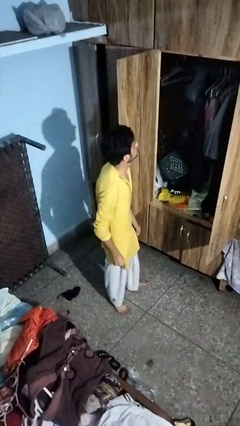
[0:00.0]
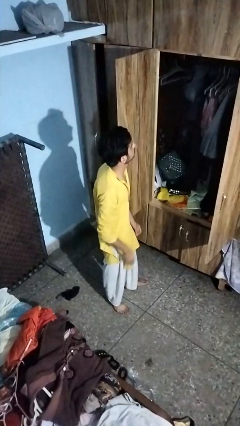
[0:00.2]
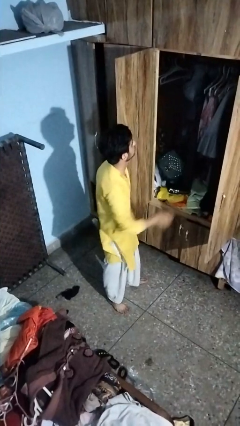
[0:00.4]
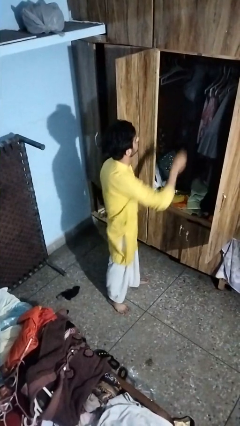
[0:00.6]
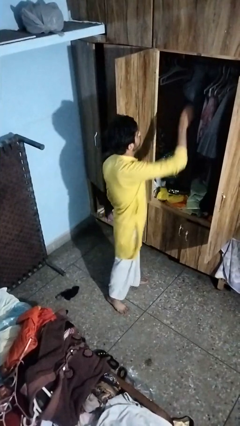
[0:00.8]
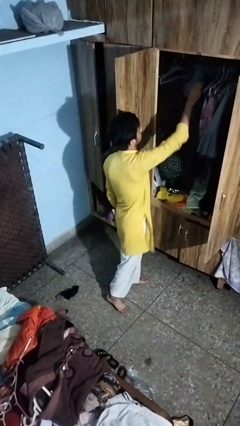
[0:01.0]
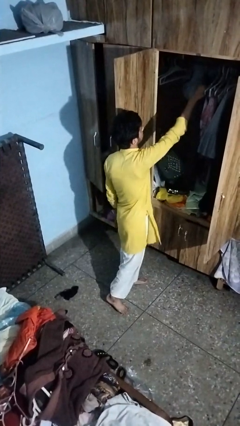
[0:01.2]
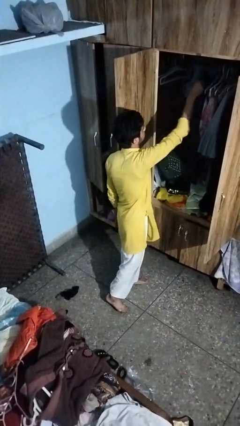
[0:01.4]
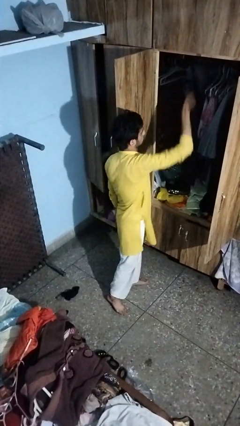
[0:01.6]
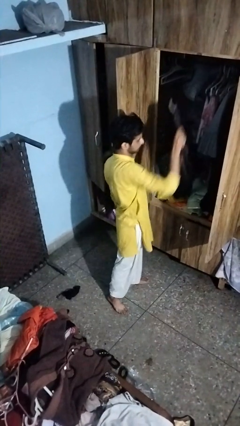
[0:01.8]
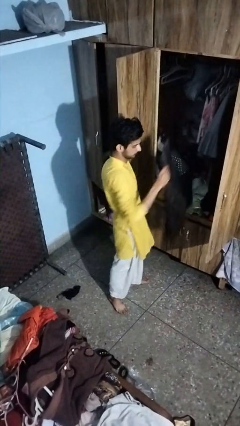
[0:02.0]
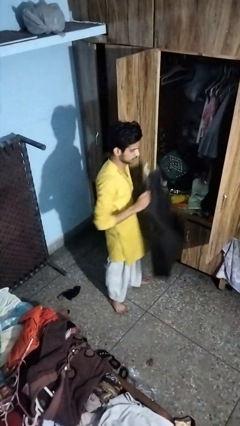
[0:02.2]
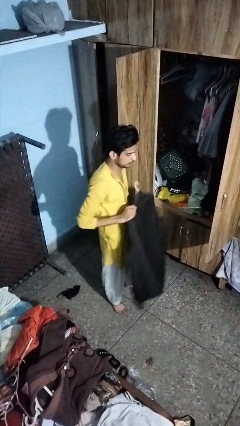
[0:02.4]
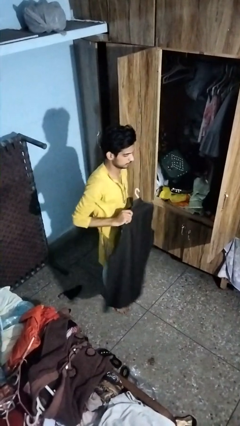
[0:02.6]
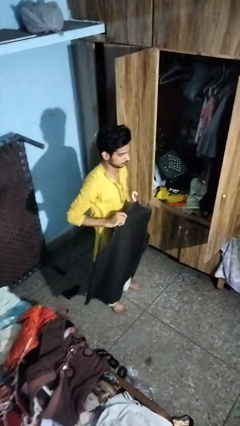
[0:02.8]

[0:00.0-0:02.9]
person takes clothes from closet

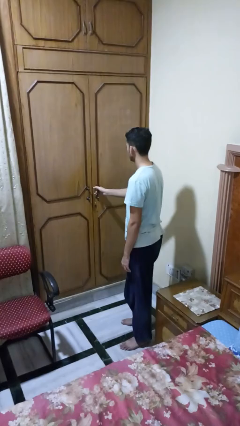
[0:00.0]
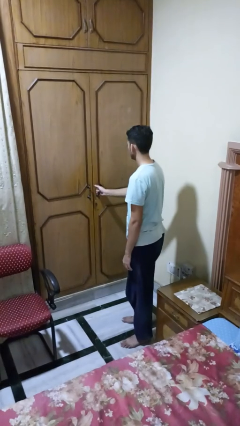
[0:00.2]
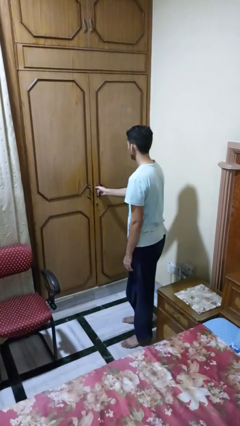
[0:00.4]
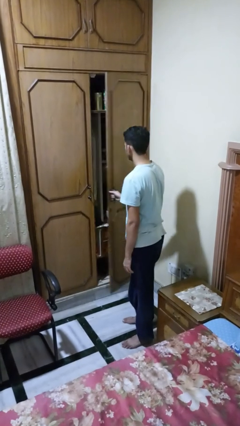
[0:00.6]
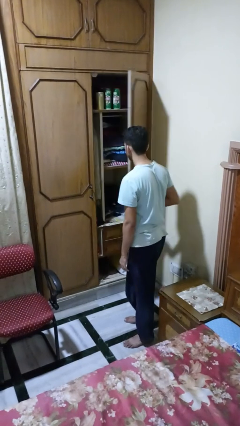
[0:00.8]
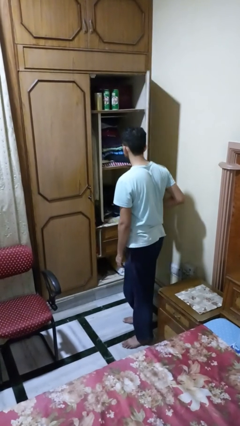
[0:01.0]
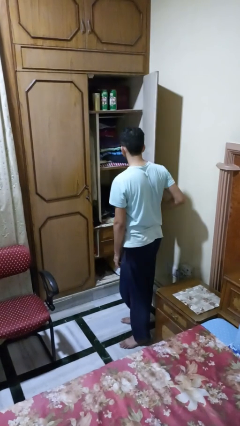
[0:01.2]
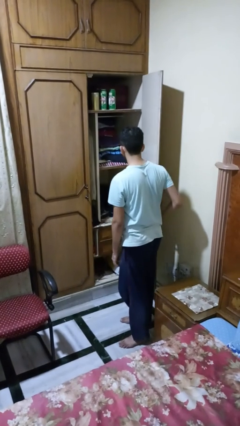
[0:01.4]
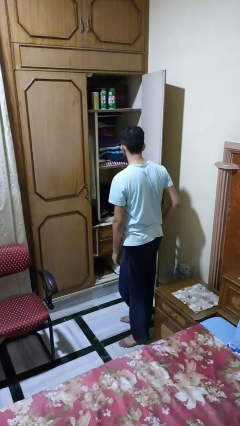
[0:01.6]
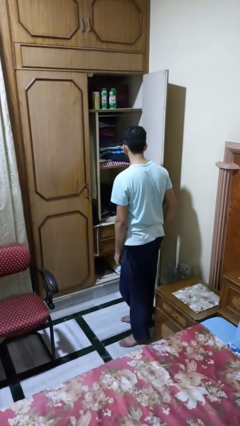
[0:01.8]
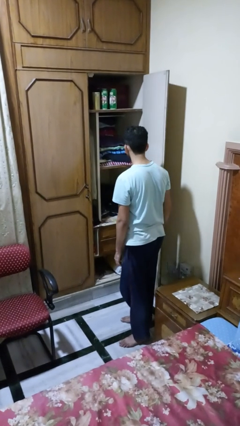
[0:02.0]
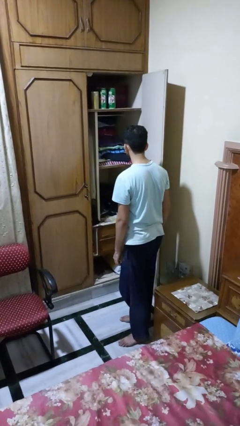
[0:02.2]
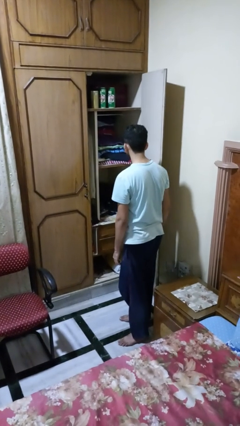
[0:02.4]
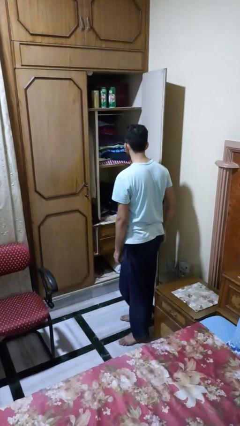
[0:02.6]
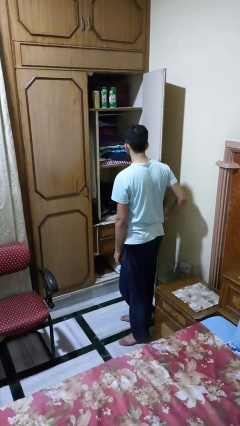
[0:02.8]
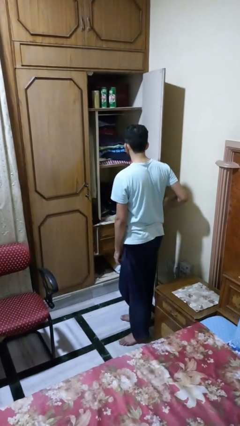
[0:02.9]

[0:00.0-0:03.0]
person opens closet door

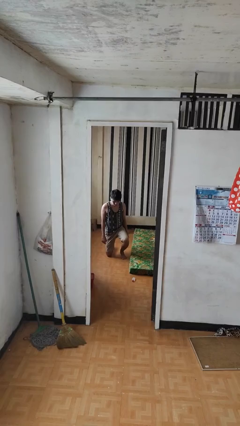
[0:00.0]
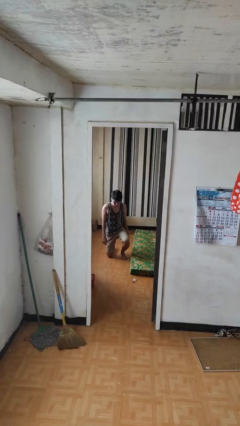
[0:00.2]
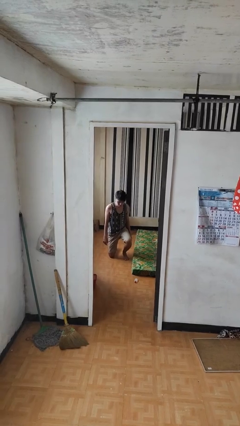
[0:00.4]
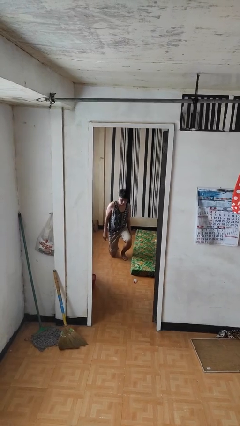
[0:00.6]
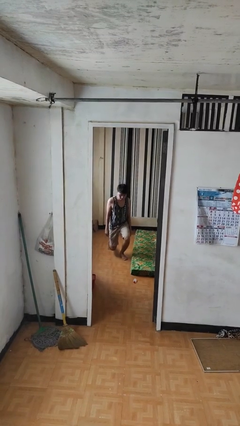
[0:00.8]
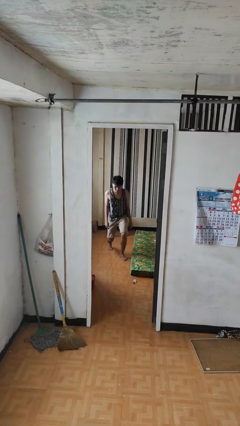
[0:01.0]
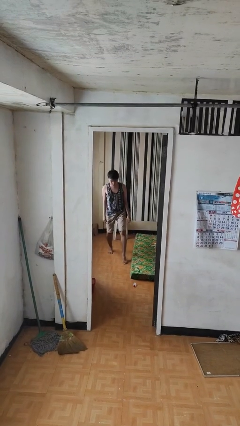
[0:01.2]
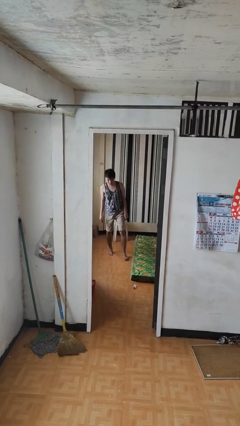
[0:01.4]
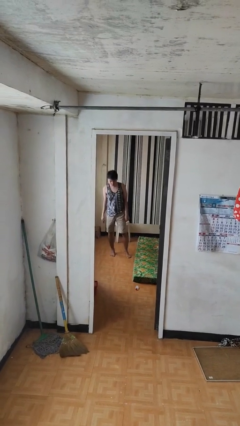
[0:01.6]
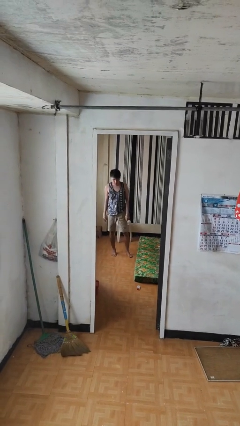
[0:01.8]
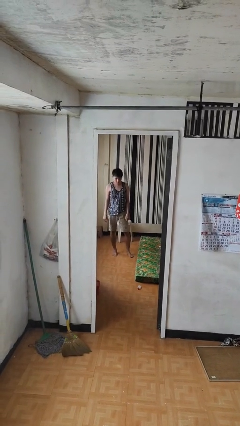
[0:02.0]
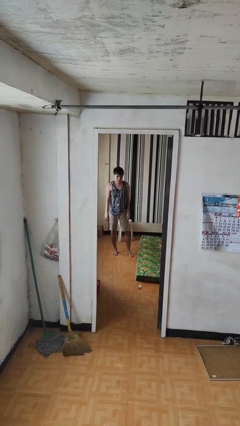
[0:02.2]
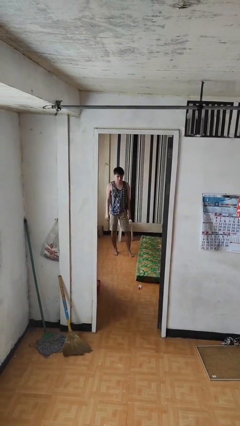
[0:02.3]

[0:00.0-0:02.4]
person stands up from floor

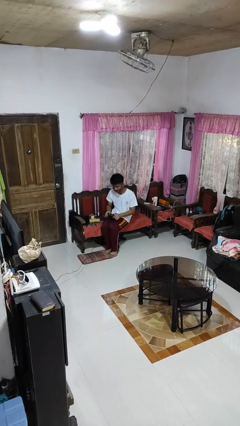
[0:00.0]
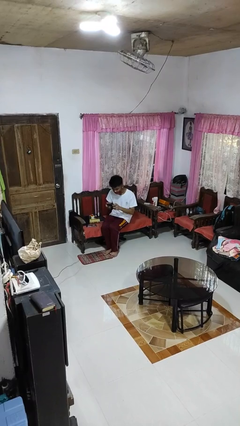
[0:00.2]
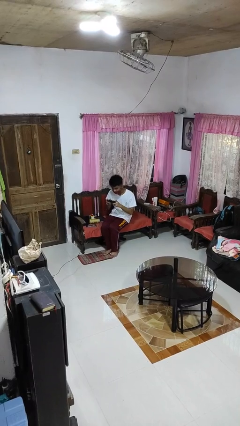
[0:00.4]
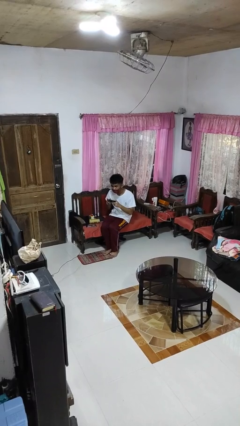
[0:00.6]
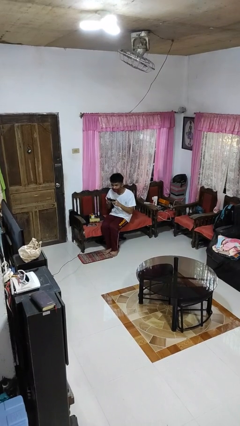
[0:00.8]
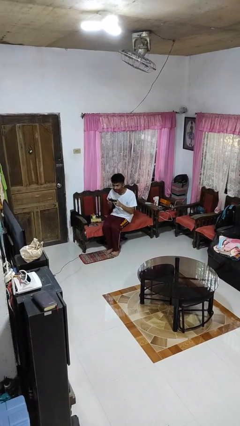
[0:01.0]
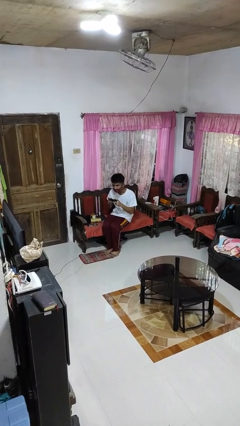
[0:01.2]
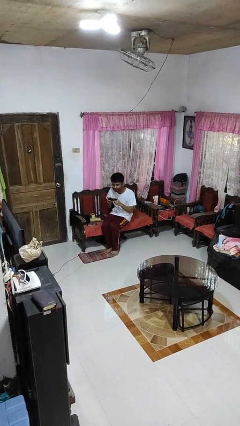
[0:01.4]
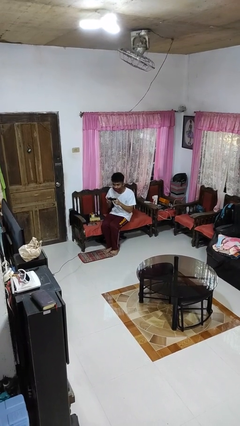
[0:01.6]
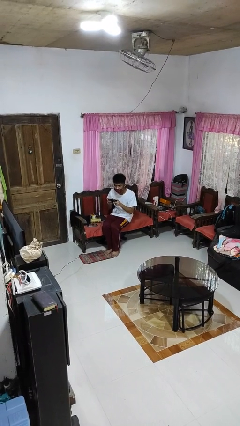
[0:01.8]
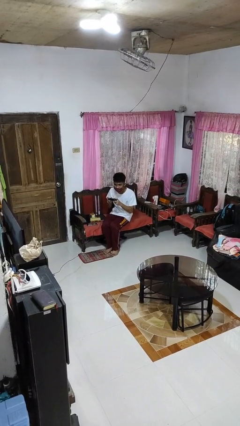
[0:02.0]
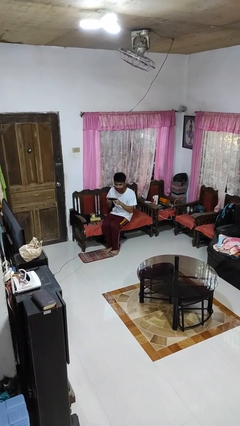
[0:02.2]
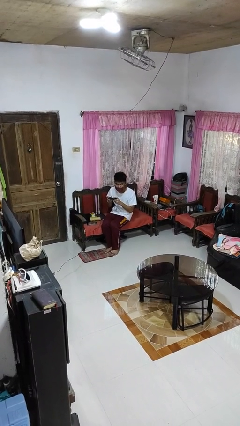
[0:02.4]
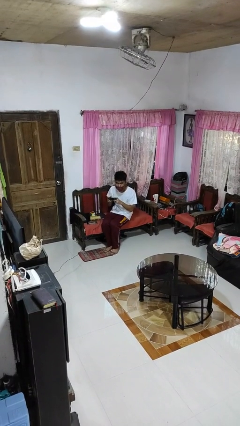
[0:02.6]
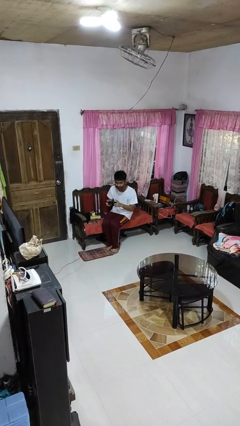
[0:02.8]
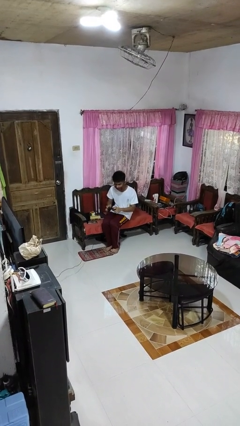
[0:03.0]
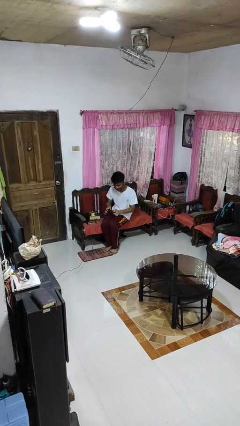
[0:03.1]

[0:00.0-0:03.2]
person interacts with handheld game

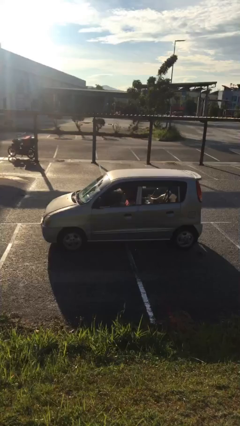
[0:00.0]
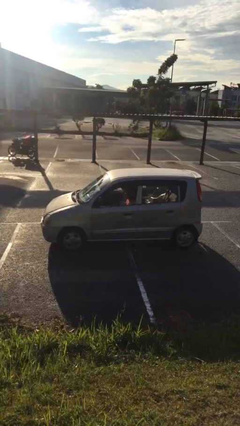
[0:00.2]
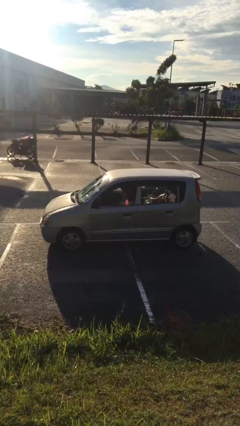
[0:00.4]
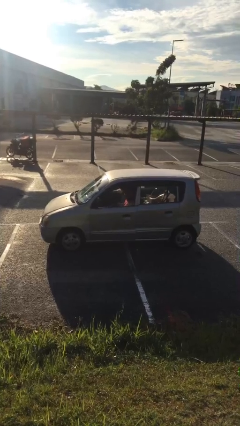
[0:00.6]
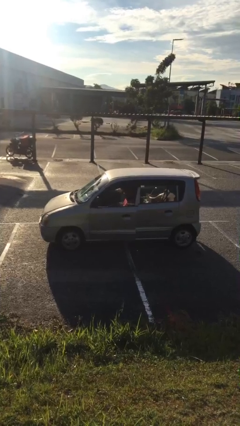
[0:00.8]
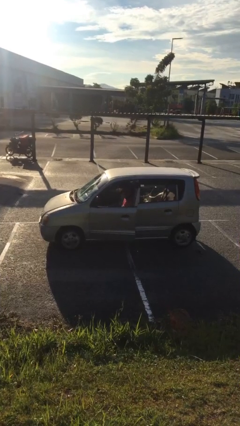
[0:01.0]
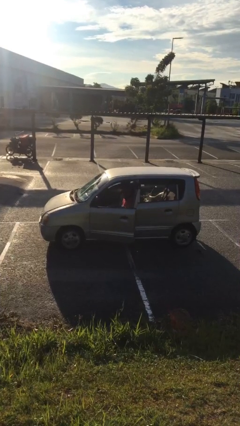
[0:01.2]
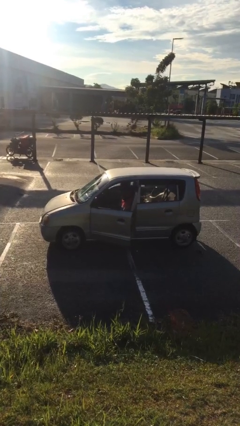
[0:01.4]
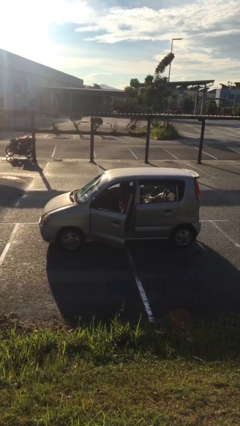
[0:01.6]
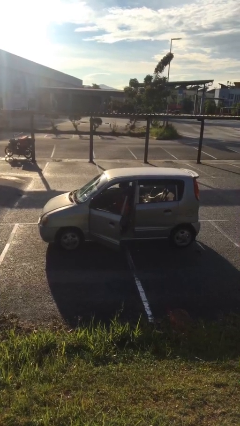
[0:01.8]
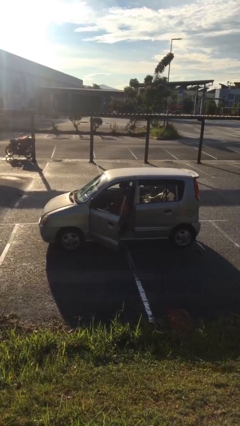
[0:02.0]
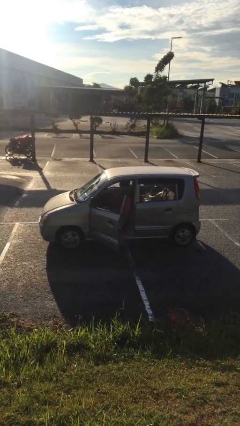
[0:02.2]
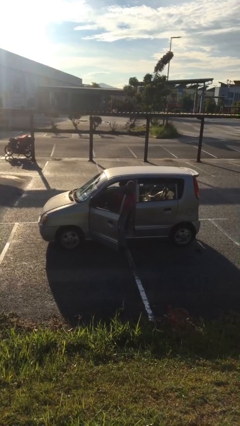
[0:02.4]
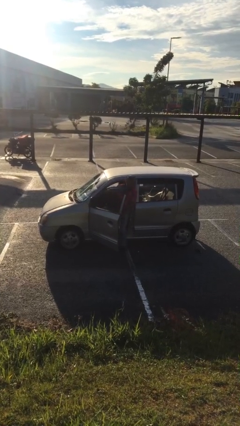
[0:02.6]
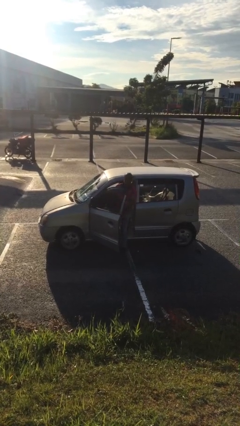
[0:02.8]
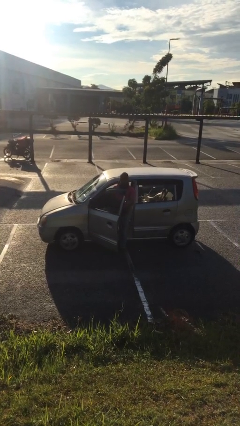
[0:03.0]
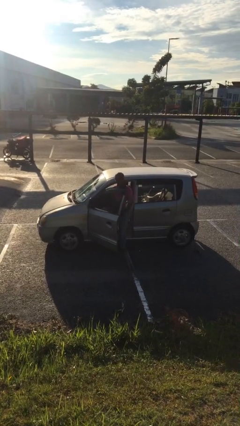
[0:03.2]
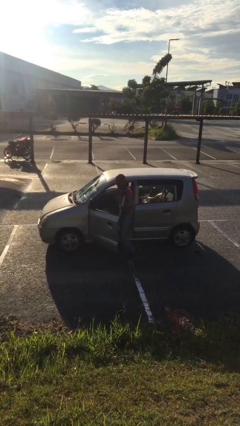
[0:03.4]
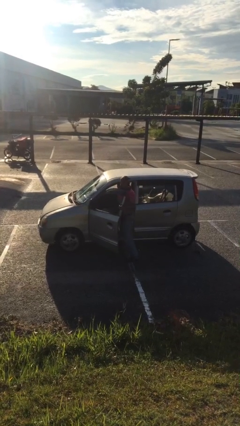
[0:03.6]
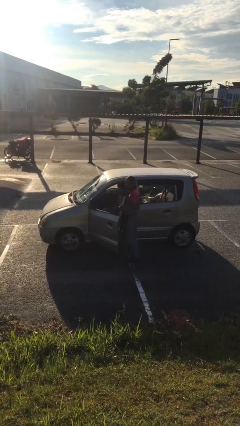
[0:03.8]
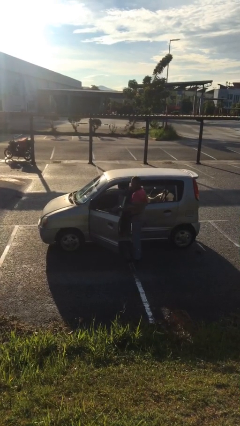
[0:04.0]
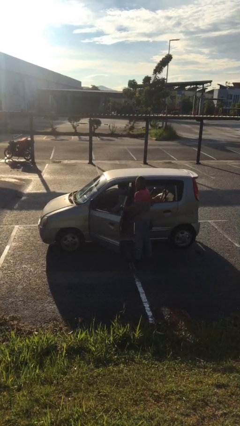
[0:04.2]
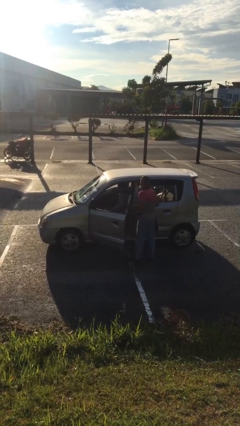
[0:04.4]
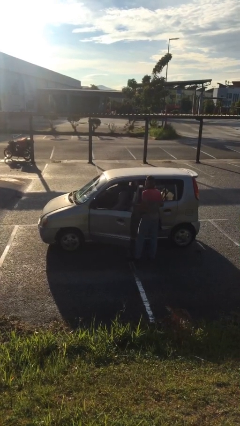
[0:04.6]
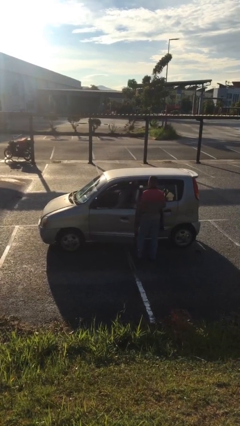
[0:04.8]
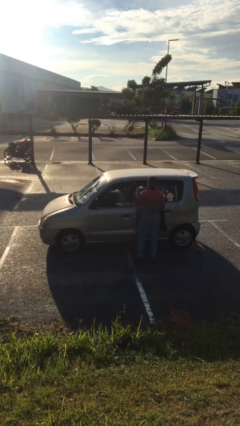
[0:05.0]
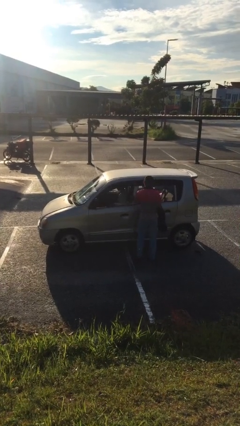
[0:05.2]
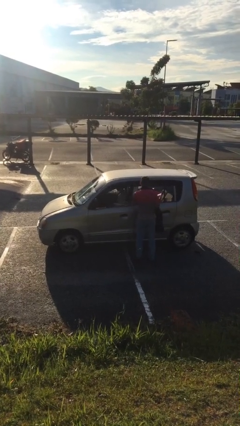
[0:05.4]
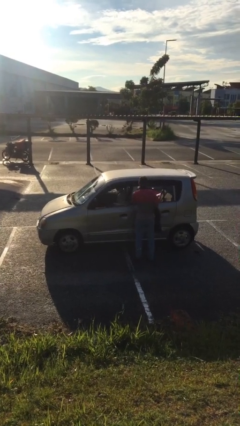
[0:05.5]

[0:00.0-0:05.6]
car drops off person

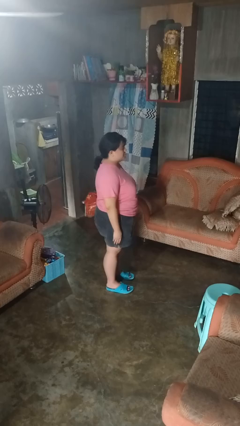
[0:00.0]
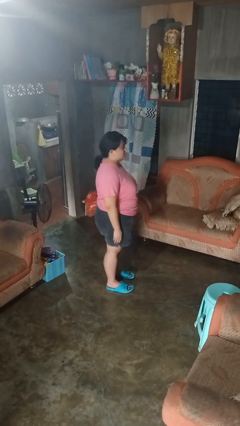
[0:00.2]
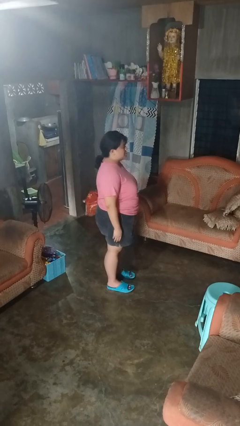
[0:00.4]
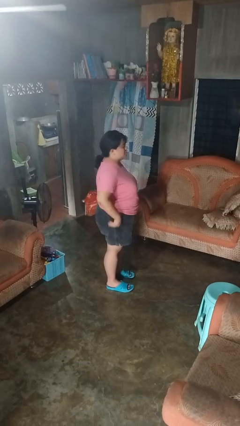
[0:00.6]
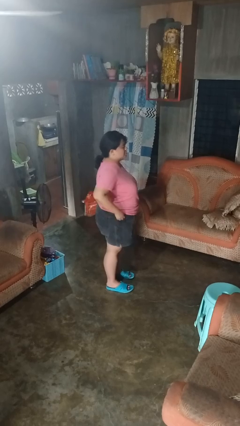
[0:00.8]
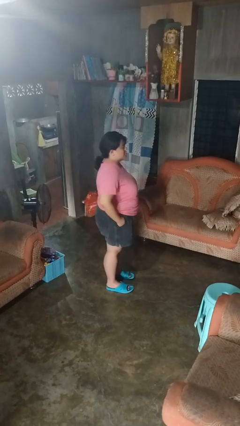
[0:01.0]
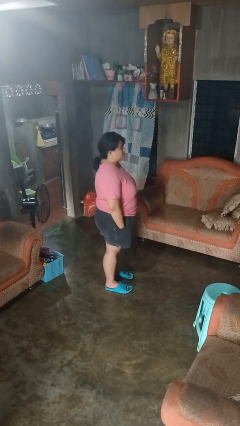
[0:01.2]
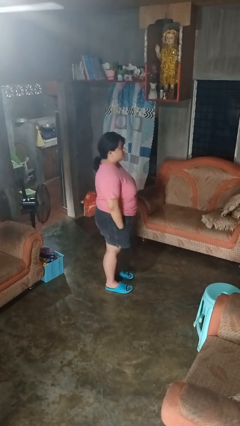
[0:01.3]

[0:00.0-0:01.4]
person puts hands in back pockets
